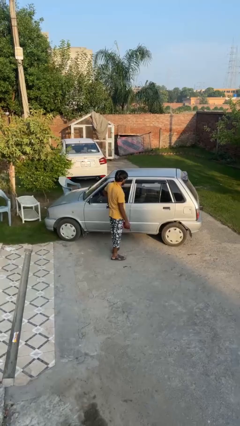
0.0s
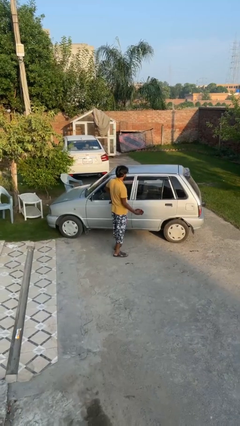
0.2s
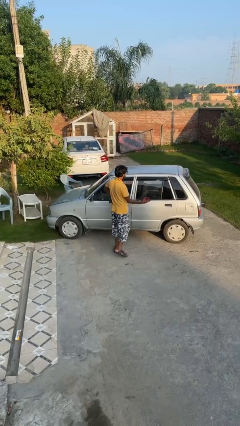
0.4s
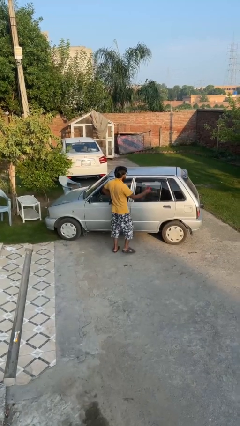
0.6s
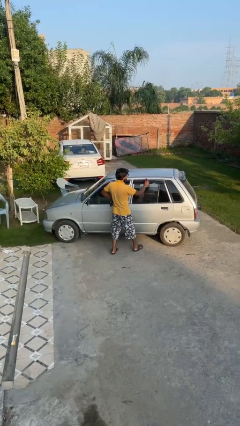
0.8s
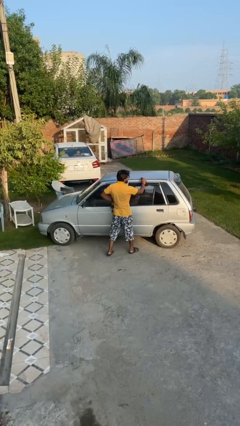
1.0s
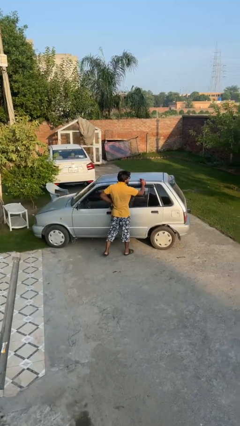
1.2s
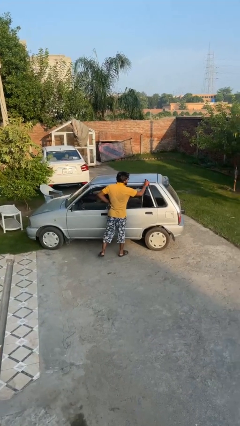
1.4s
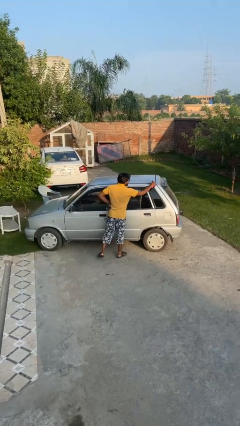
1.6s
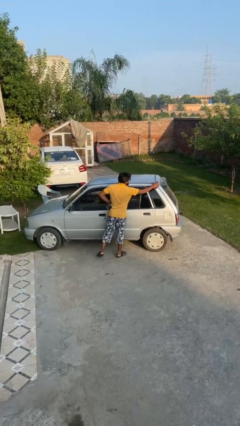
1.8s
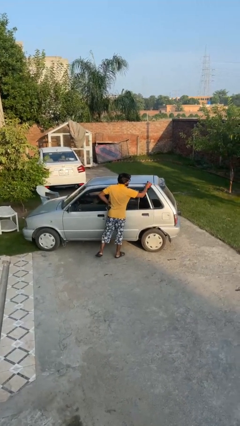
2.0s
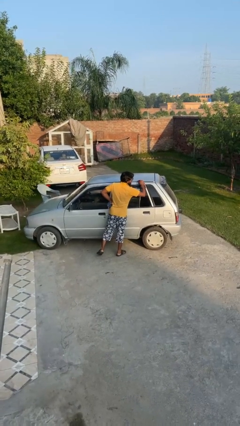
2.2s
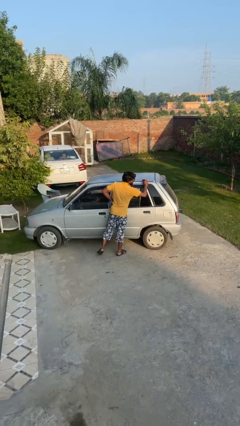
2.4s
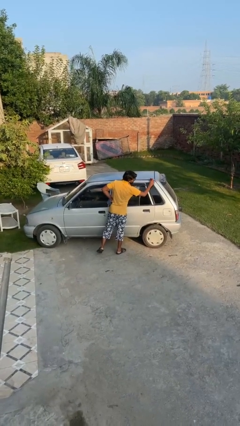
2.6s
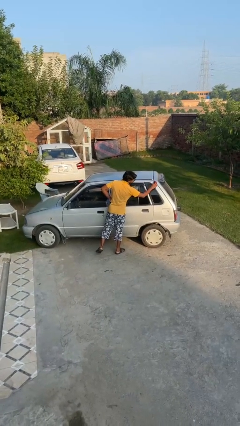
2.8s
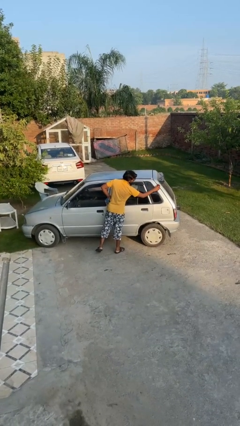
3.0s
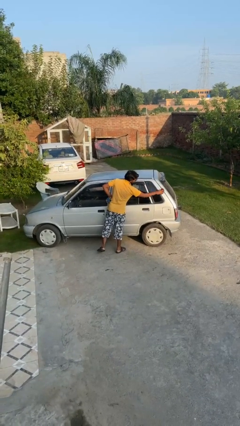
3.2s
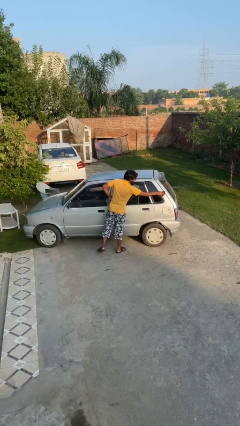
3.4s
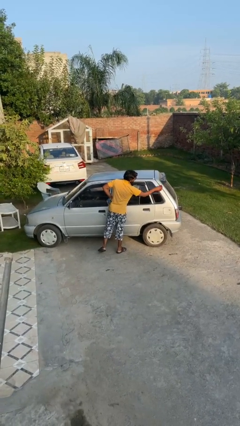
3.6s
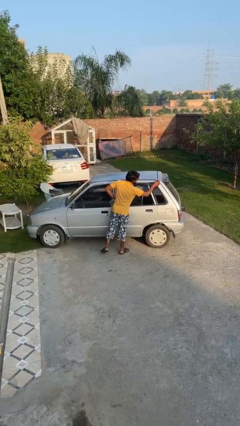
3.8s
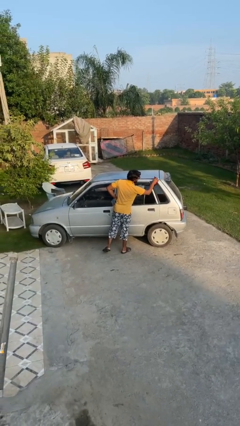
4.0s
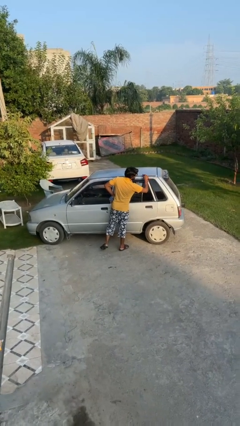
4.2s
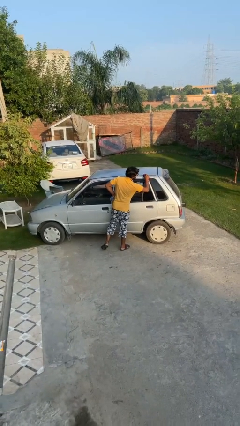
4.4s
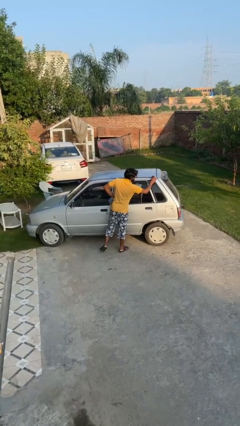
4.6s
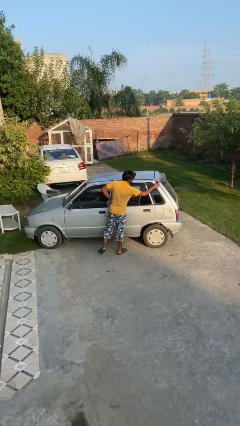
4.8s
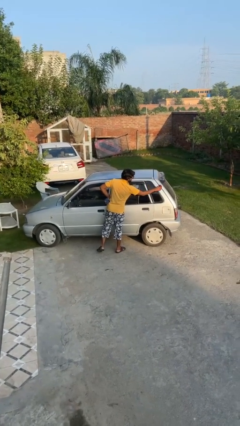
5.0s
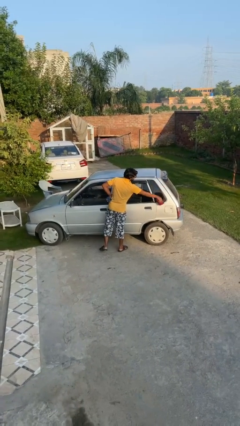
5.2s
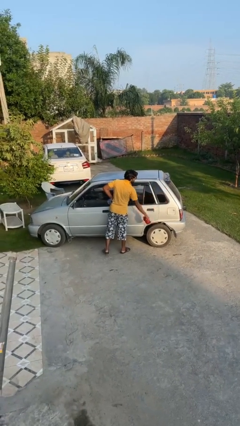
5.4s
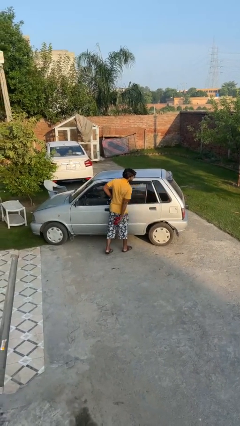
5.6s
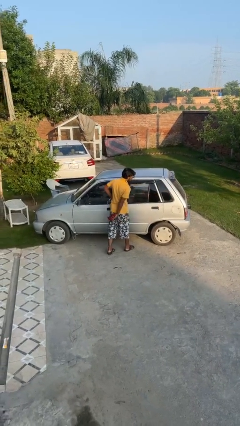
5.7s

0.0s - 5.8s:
person polishes car with rag

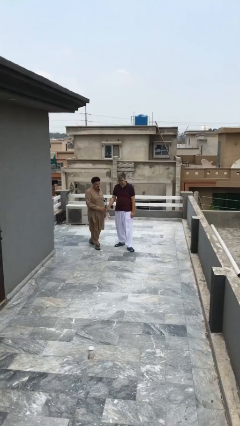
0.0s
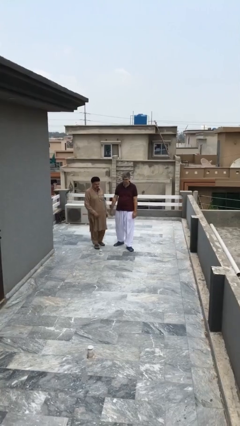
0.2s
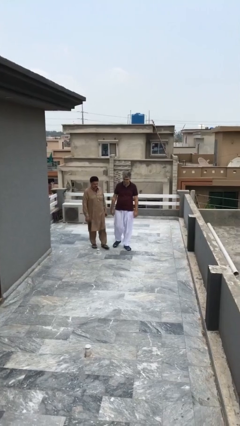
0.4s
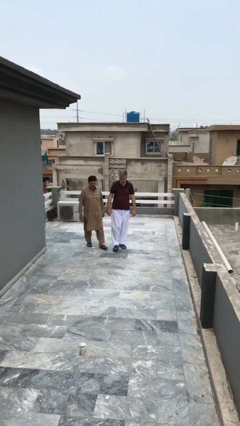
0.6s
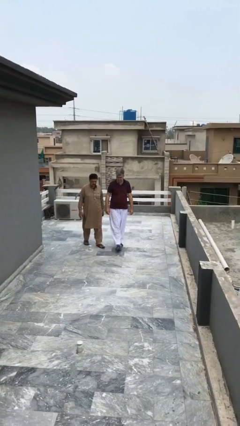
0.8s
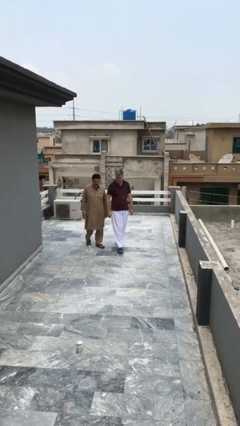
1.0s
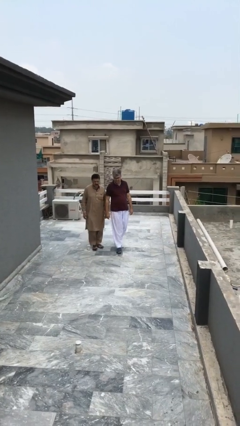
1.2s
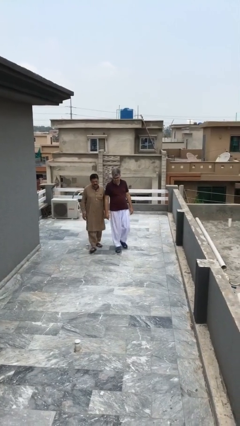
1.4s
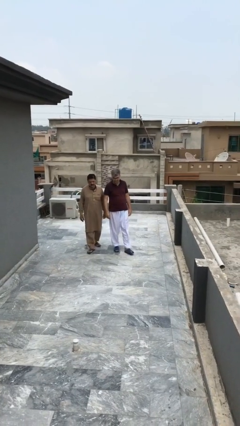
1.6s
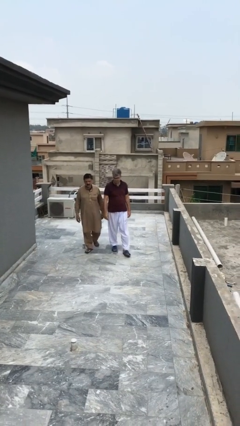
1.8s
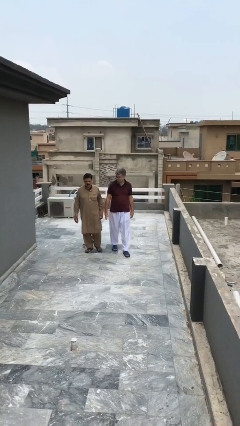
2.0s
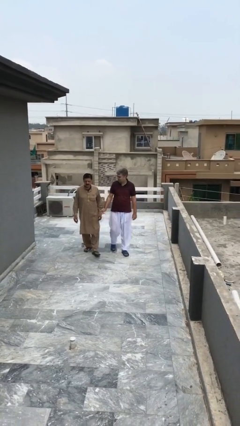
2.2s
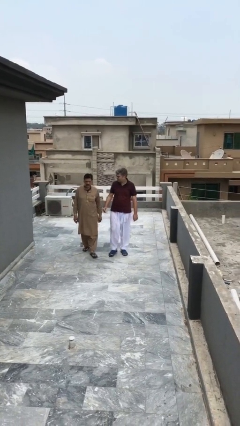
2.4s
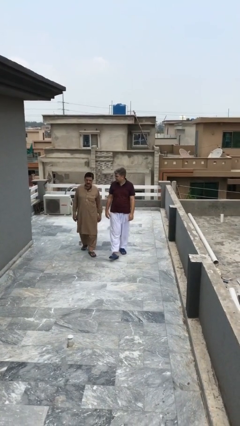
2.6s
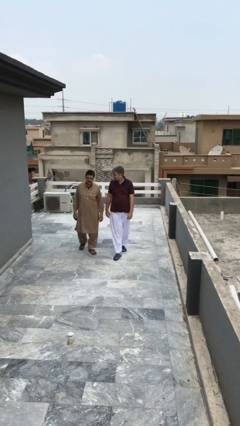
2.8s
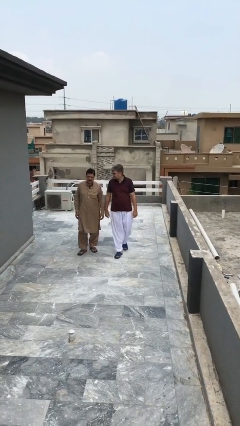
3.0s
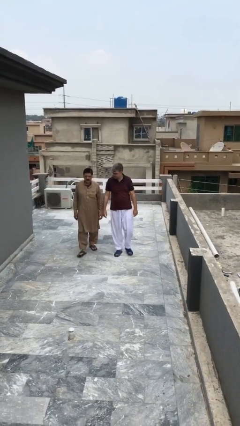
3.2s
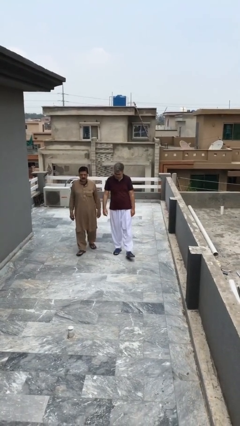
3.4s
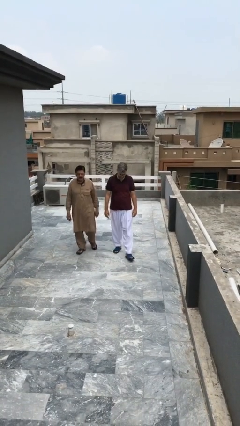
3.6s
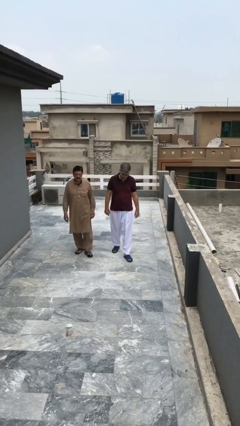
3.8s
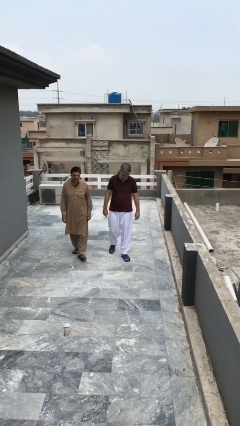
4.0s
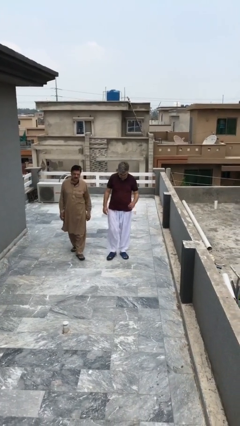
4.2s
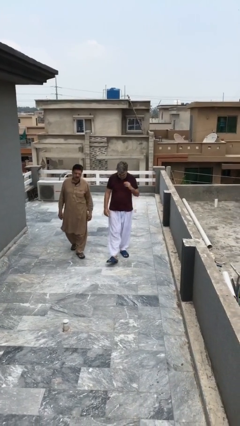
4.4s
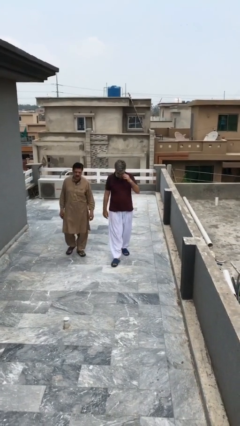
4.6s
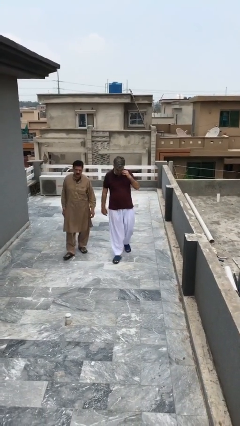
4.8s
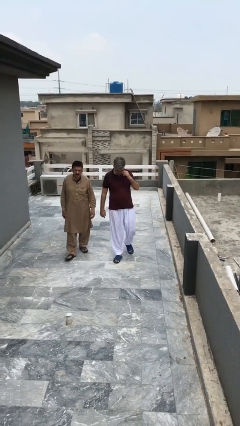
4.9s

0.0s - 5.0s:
person talks to person

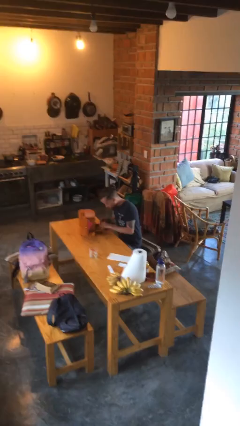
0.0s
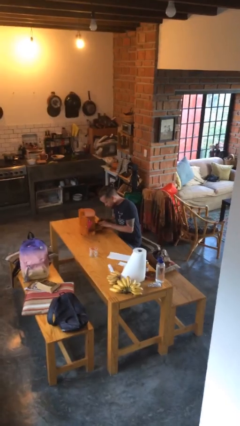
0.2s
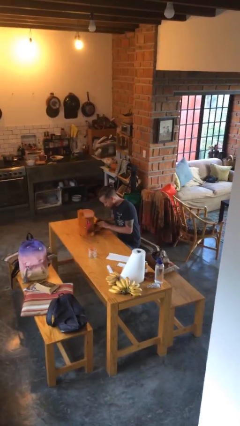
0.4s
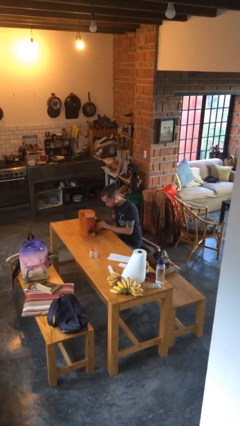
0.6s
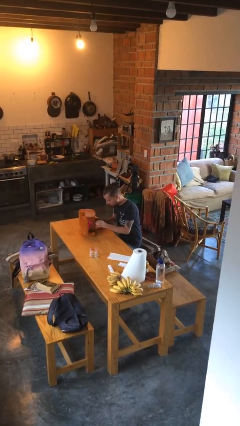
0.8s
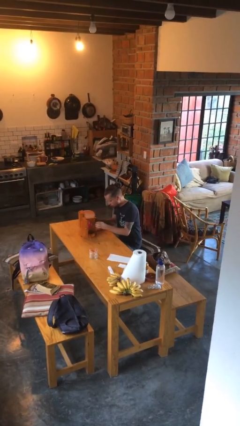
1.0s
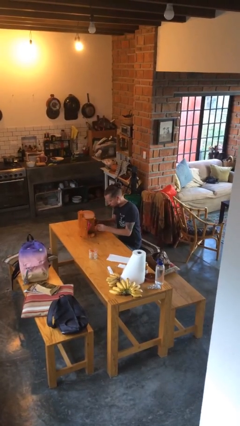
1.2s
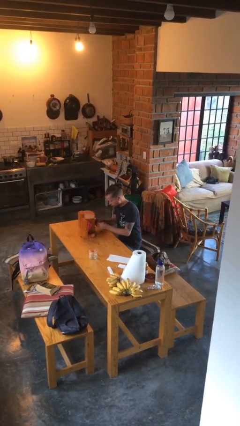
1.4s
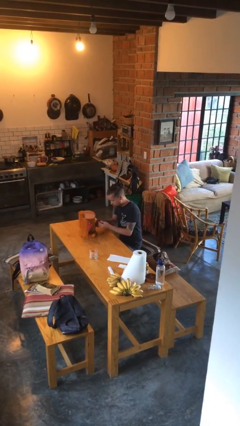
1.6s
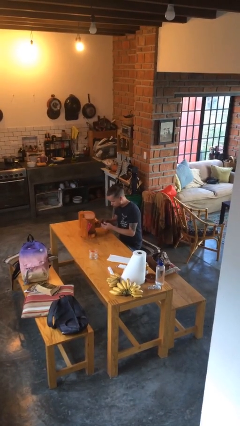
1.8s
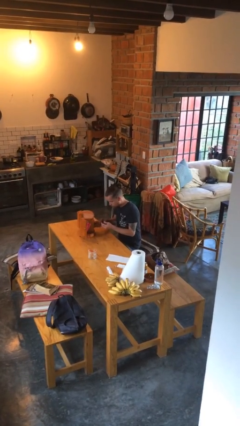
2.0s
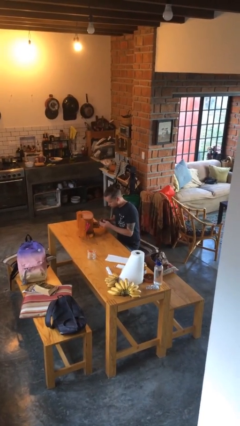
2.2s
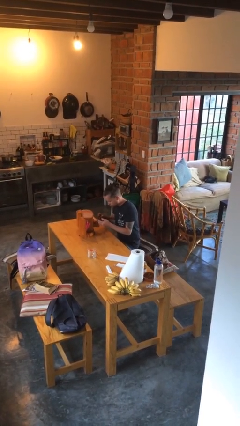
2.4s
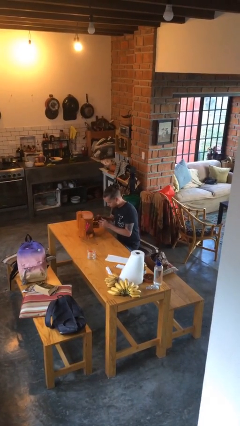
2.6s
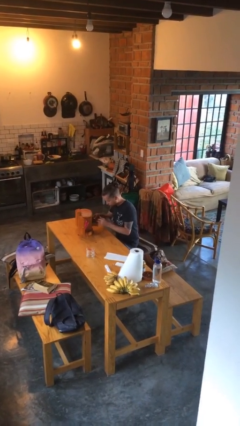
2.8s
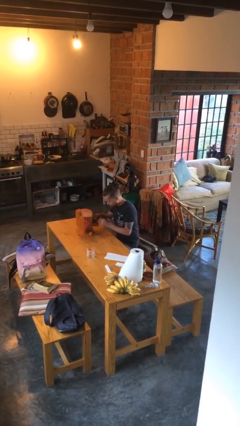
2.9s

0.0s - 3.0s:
person opens jewelry box

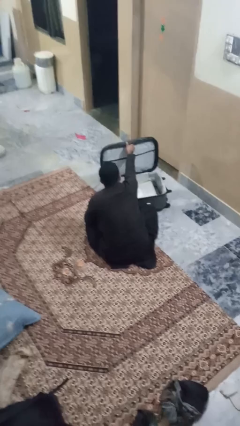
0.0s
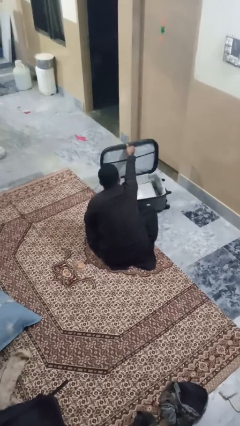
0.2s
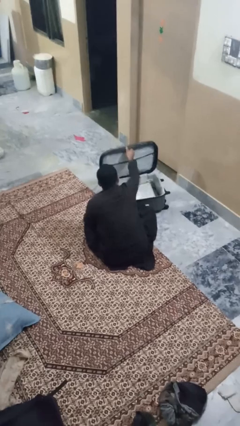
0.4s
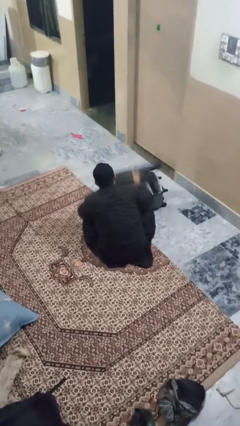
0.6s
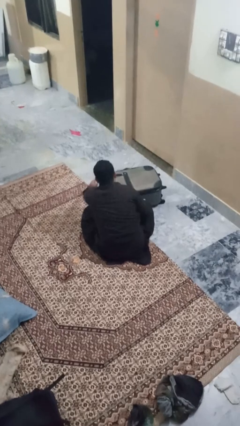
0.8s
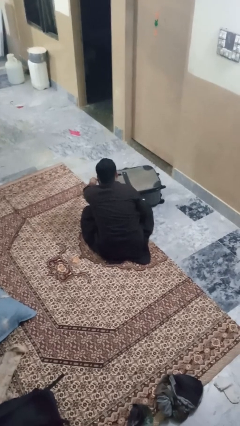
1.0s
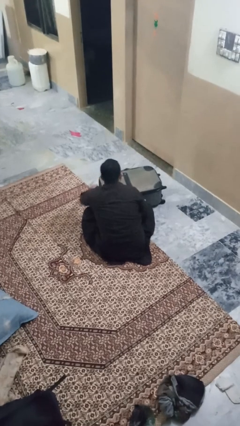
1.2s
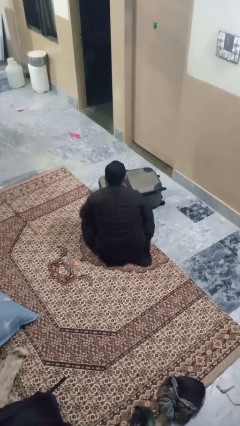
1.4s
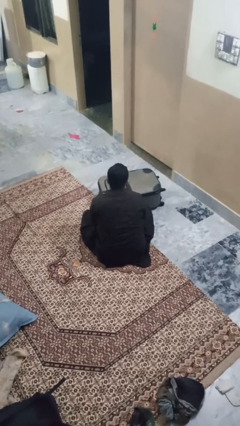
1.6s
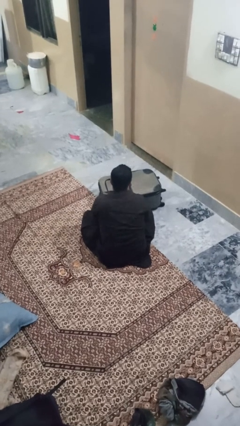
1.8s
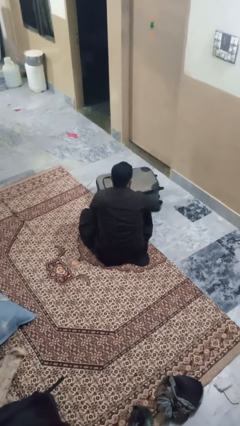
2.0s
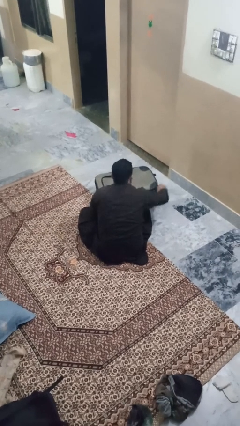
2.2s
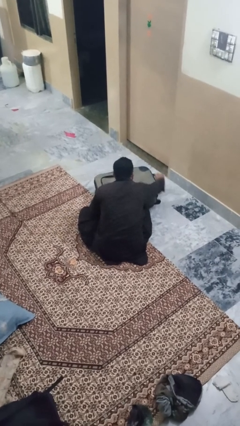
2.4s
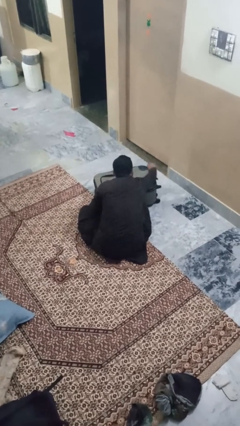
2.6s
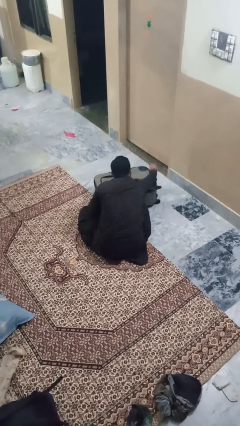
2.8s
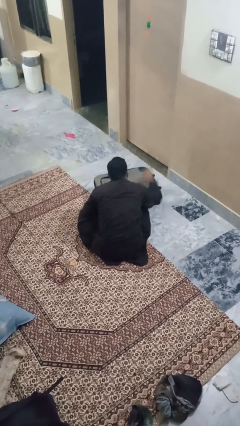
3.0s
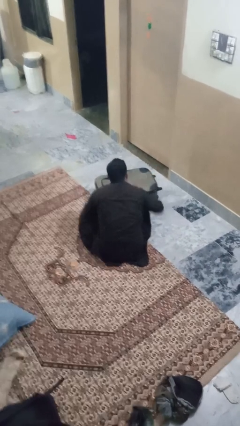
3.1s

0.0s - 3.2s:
person closes suitcase

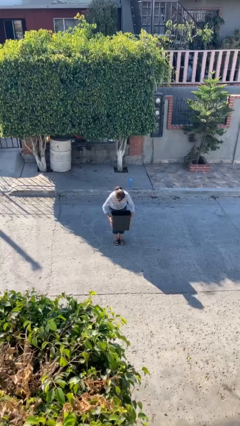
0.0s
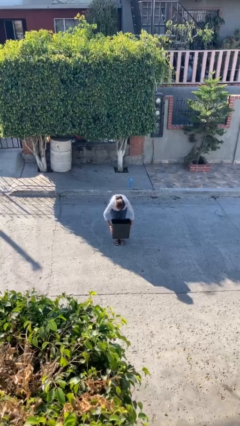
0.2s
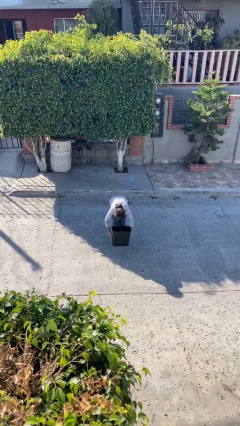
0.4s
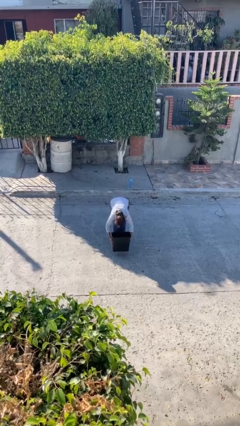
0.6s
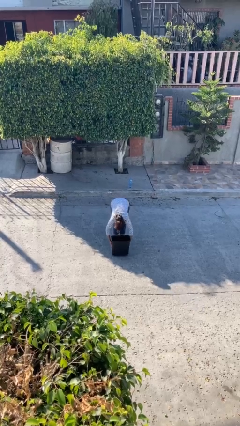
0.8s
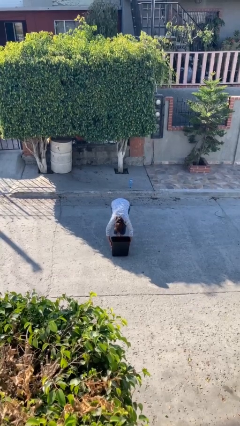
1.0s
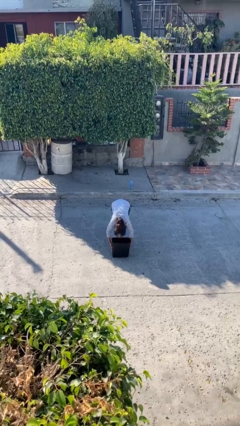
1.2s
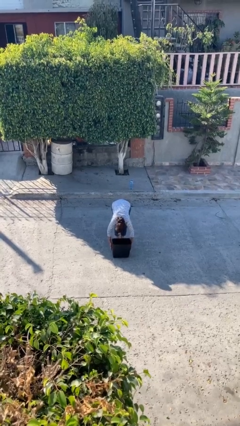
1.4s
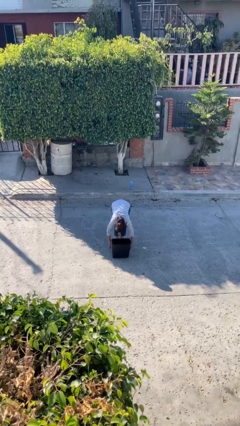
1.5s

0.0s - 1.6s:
person puts down object on floor
